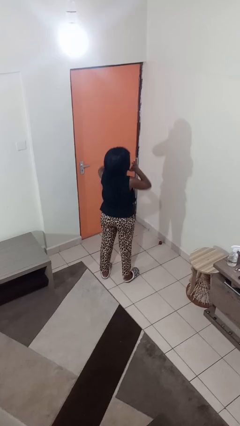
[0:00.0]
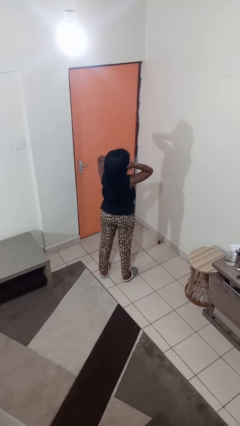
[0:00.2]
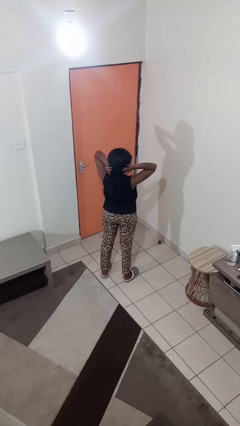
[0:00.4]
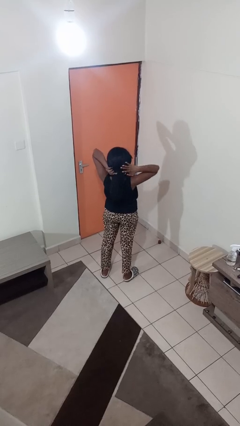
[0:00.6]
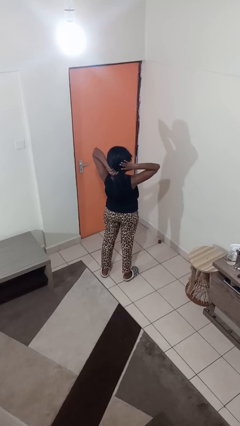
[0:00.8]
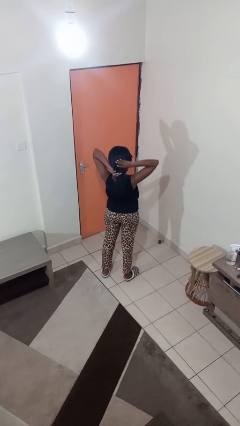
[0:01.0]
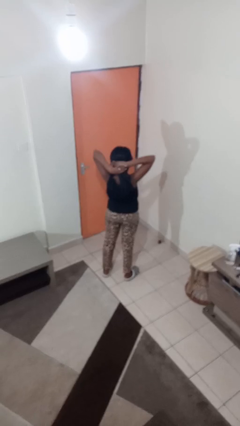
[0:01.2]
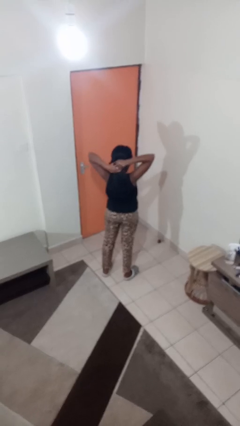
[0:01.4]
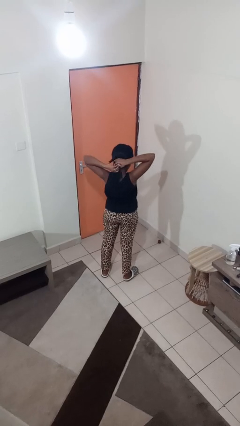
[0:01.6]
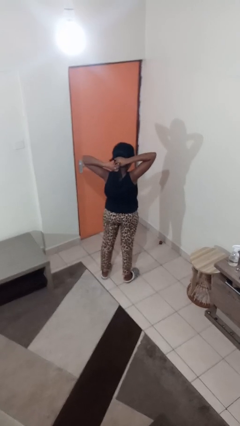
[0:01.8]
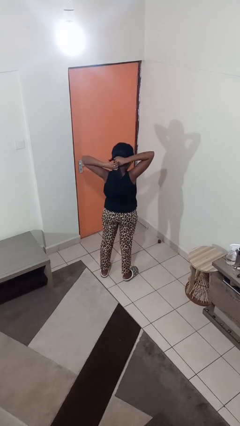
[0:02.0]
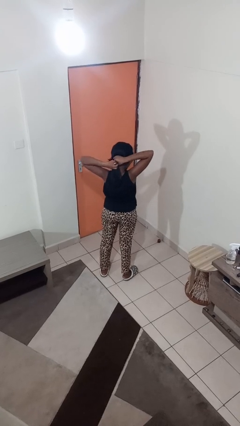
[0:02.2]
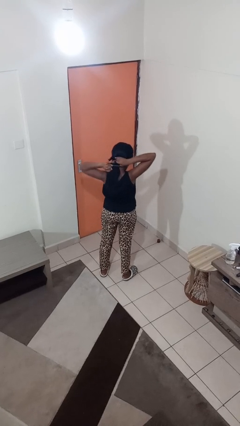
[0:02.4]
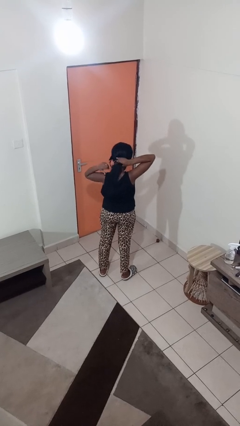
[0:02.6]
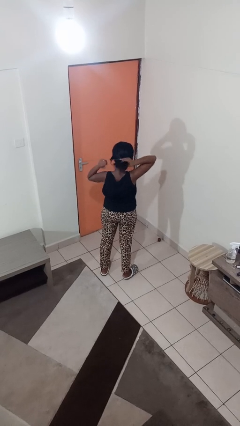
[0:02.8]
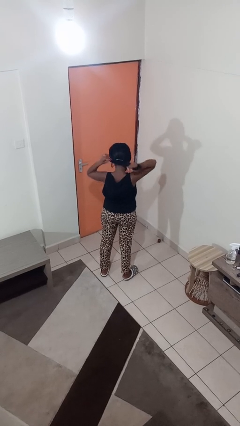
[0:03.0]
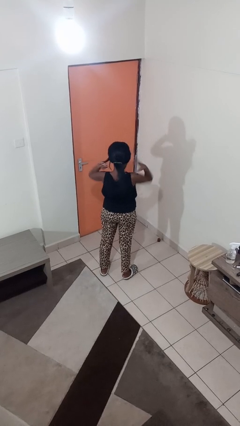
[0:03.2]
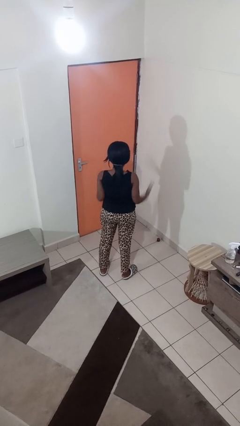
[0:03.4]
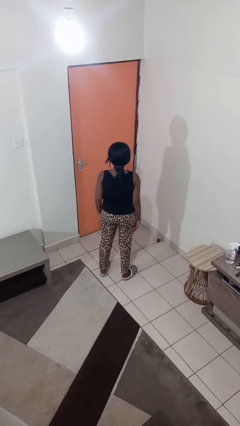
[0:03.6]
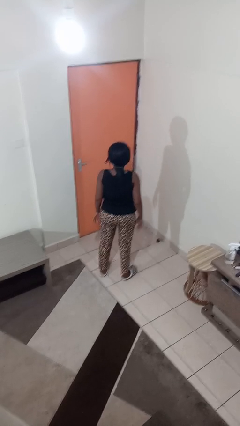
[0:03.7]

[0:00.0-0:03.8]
person puts hair in ponytail

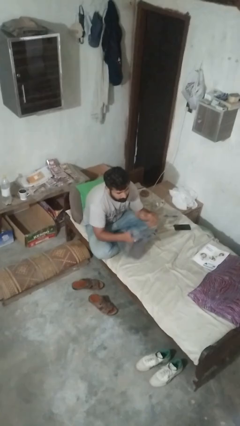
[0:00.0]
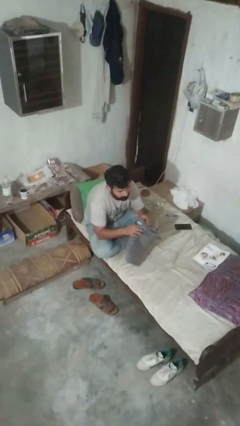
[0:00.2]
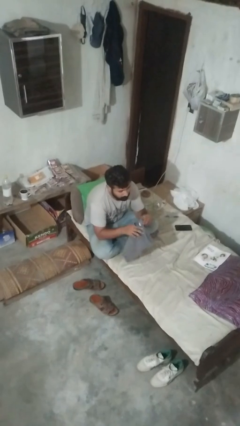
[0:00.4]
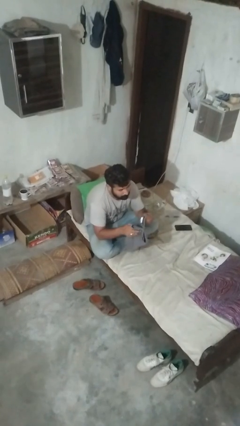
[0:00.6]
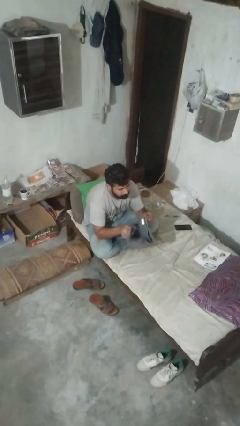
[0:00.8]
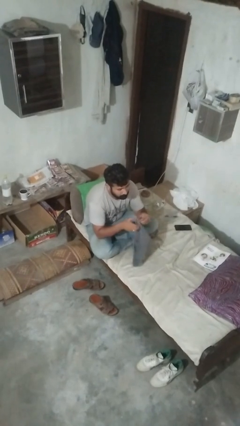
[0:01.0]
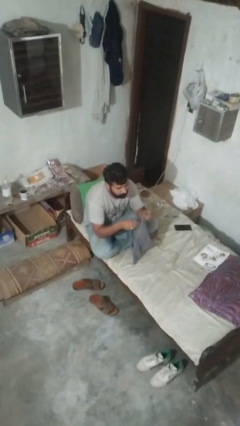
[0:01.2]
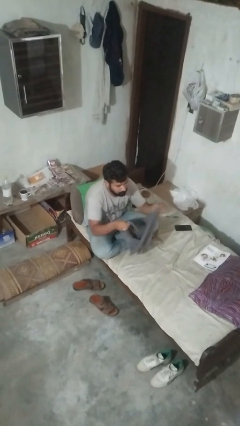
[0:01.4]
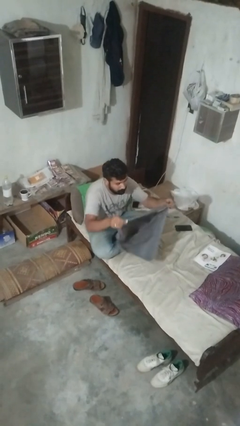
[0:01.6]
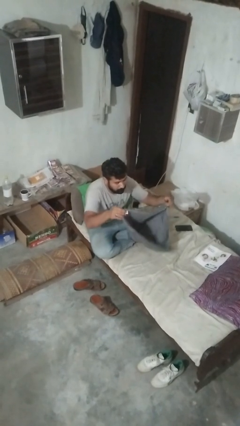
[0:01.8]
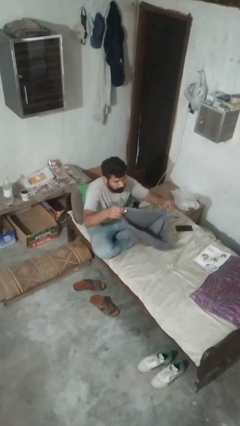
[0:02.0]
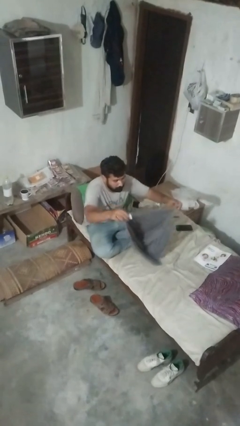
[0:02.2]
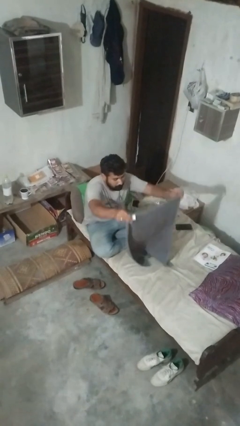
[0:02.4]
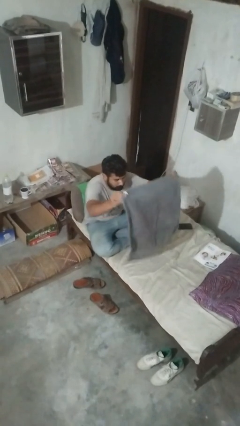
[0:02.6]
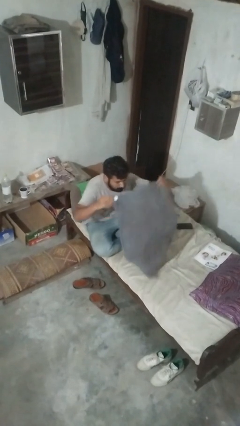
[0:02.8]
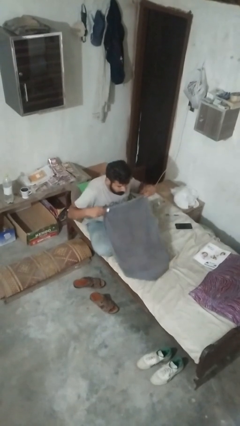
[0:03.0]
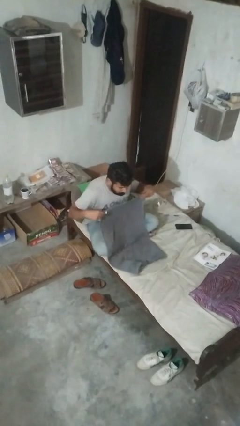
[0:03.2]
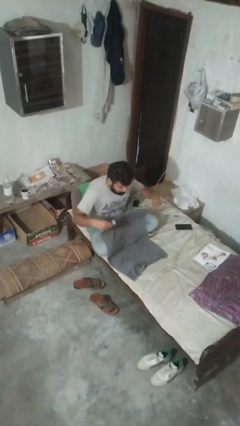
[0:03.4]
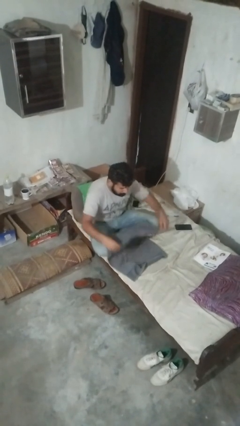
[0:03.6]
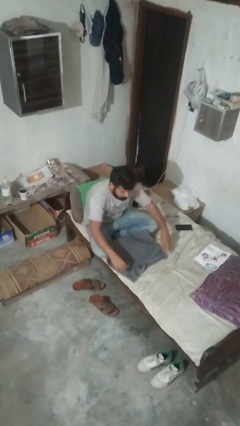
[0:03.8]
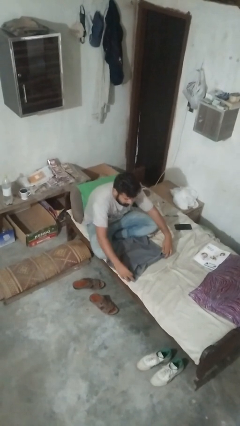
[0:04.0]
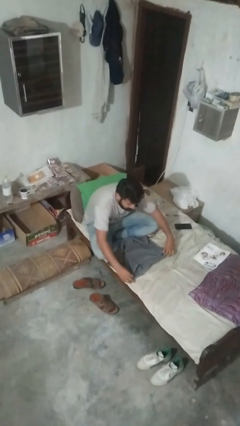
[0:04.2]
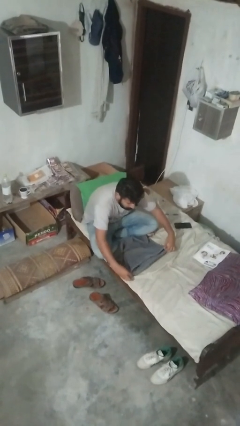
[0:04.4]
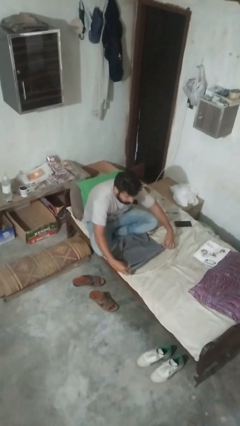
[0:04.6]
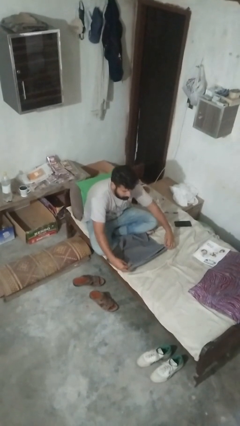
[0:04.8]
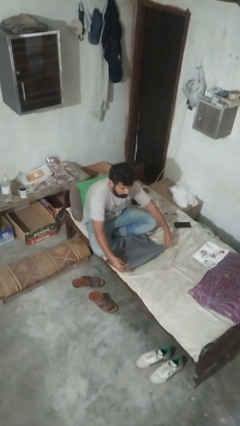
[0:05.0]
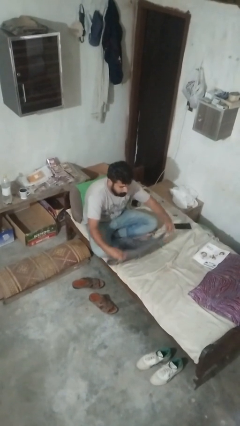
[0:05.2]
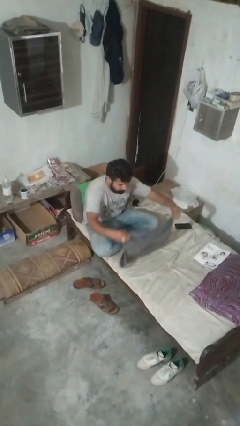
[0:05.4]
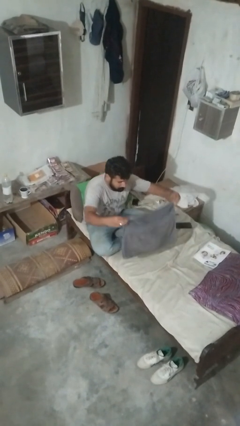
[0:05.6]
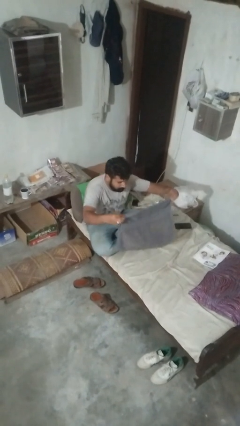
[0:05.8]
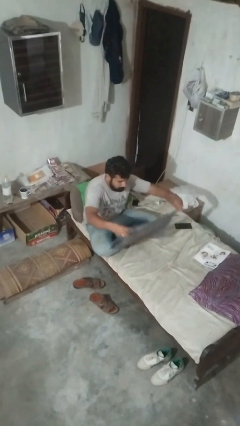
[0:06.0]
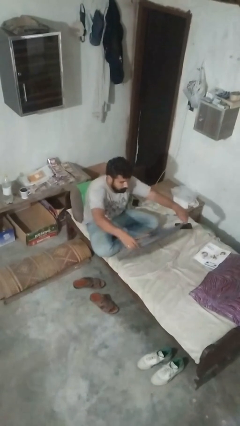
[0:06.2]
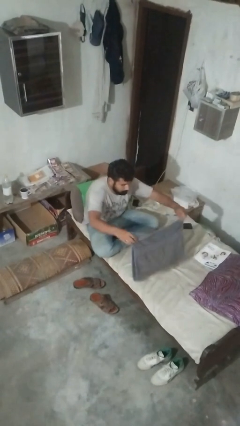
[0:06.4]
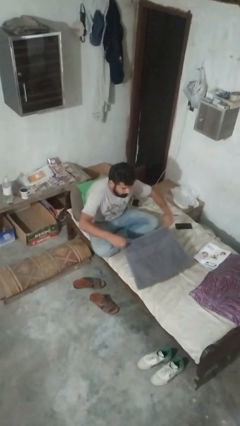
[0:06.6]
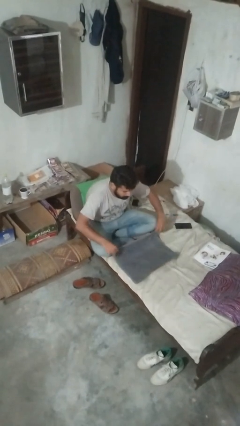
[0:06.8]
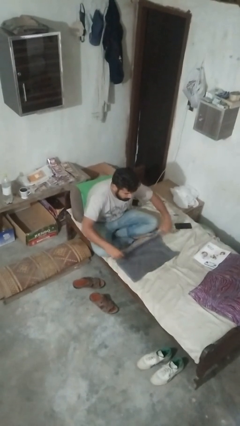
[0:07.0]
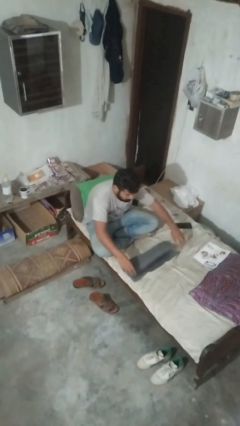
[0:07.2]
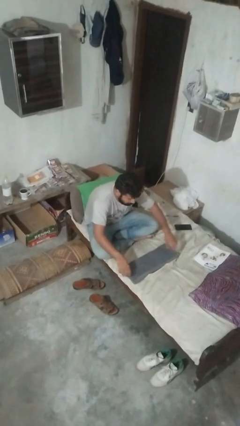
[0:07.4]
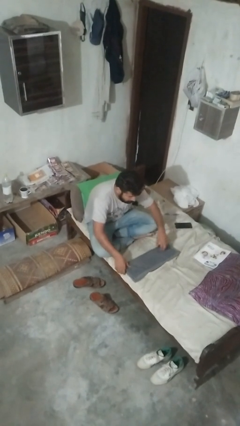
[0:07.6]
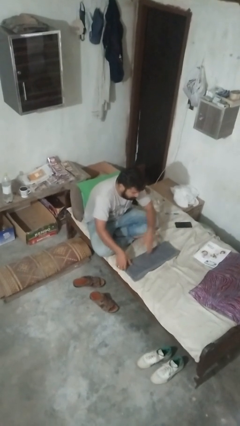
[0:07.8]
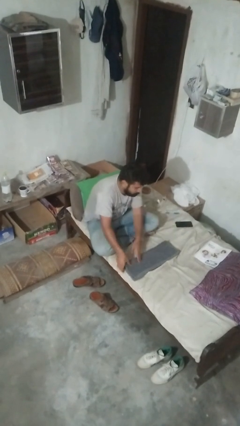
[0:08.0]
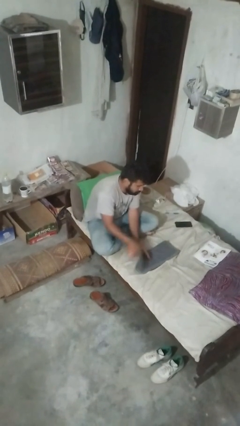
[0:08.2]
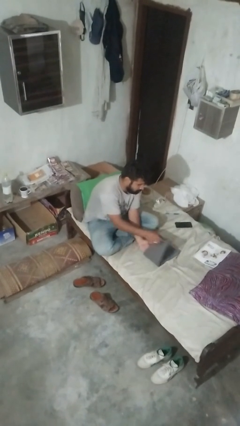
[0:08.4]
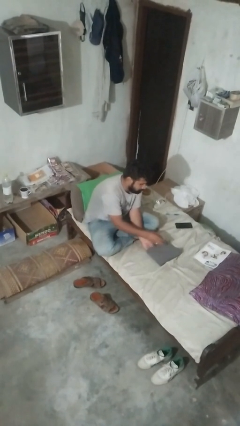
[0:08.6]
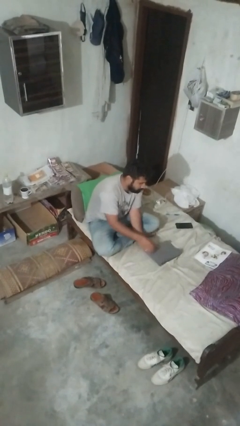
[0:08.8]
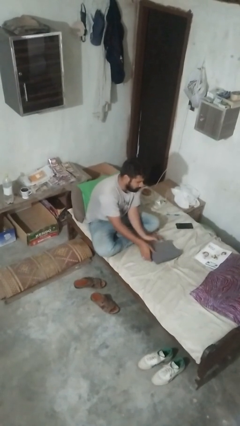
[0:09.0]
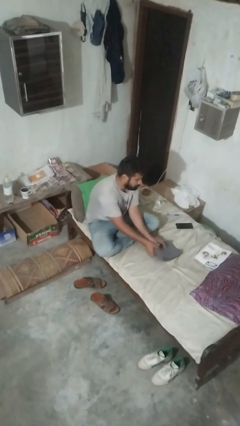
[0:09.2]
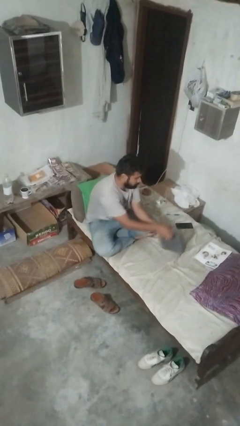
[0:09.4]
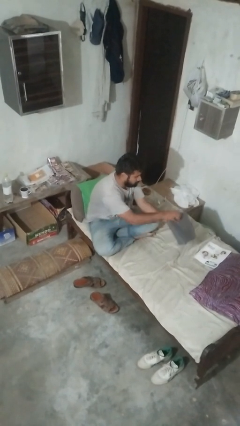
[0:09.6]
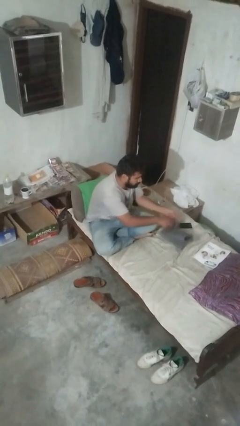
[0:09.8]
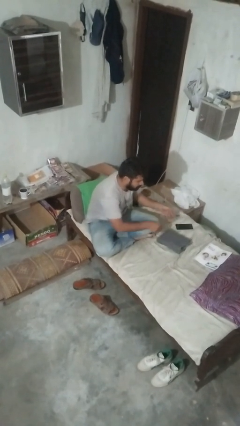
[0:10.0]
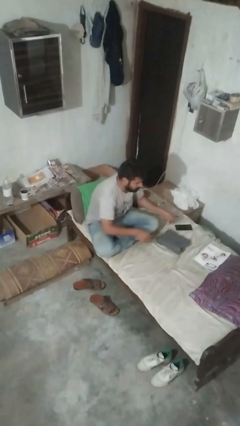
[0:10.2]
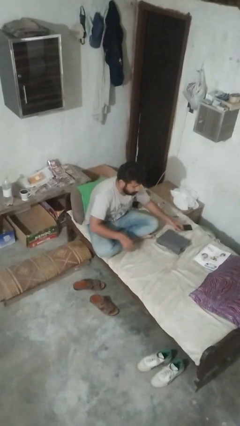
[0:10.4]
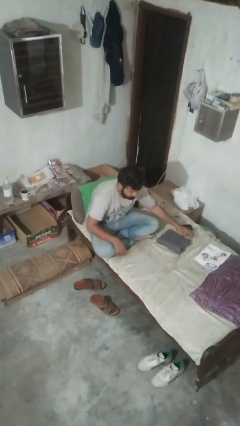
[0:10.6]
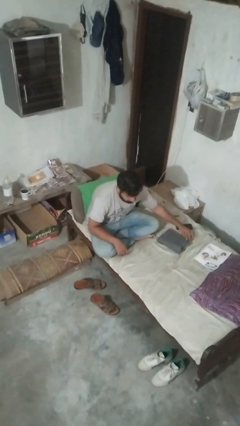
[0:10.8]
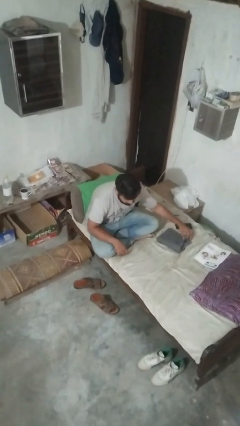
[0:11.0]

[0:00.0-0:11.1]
person folds towel

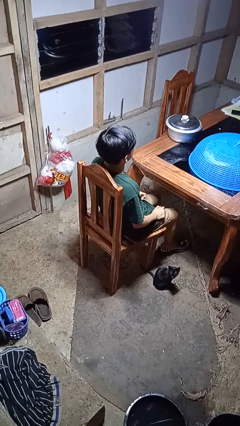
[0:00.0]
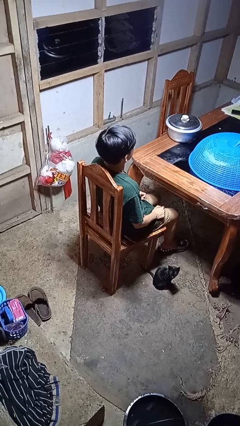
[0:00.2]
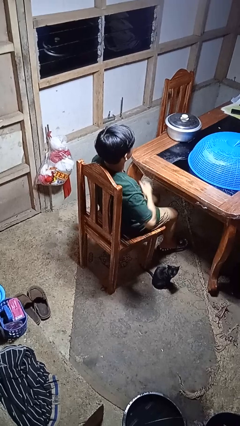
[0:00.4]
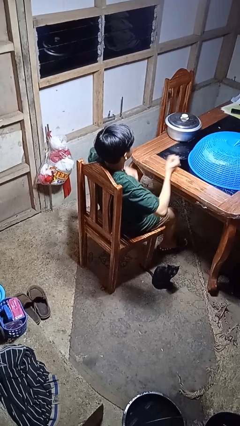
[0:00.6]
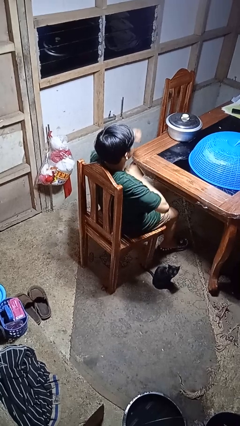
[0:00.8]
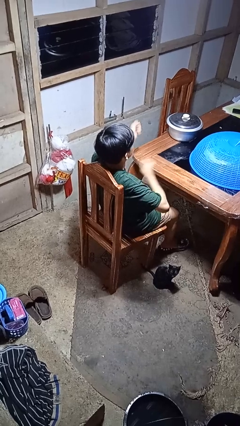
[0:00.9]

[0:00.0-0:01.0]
person drums on chest

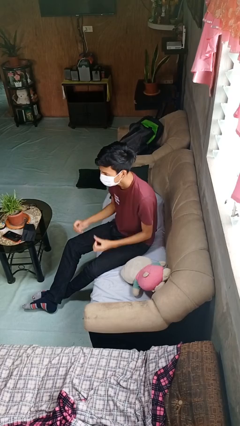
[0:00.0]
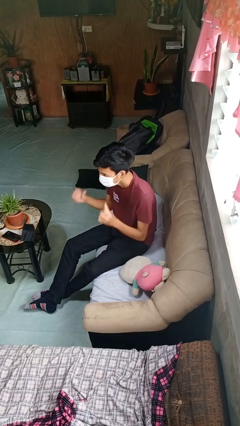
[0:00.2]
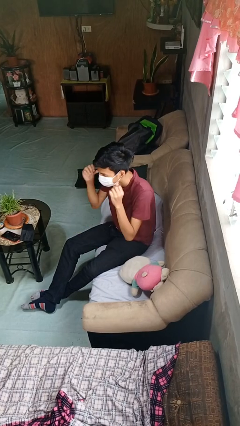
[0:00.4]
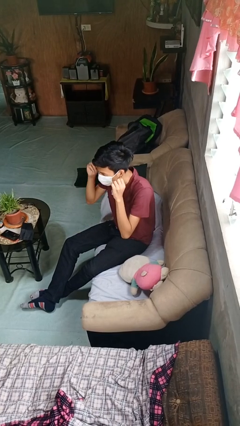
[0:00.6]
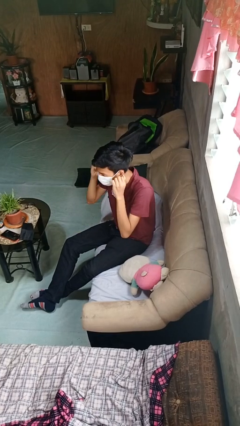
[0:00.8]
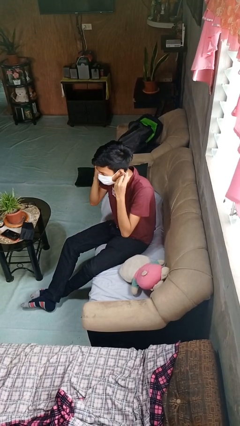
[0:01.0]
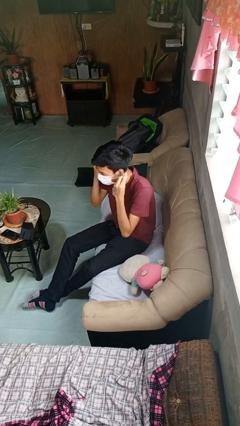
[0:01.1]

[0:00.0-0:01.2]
person takes off facemask

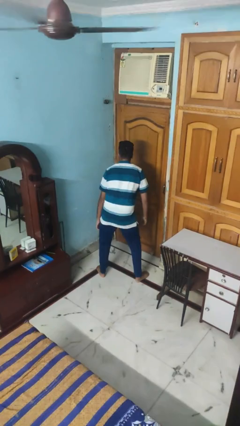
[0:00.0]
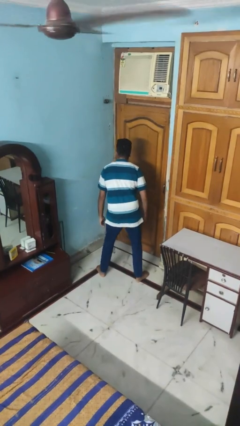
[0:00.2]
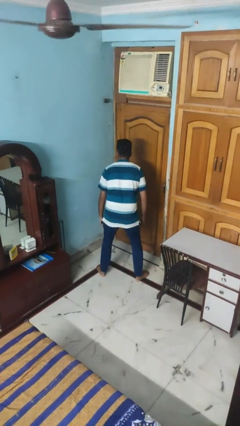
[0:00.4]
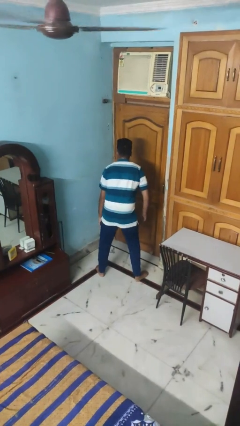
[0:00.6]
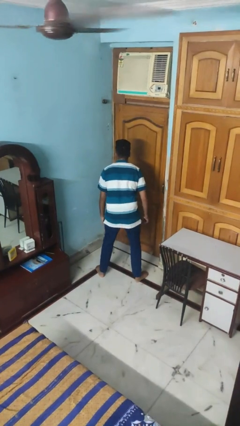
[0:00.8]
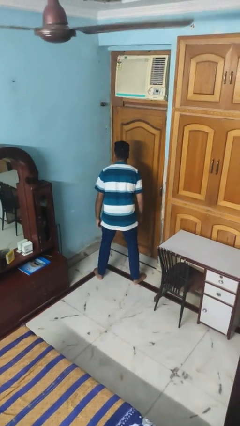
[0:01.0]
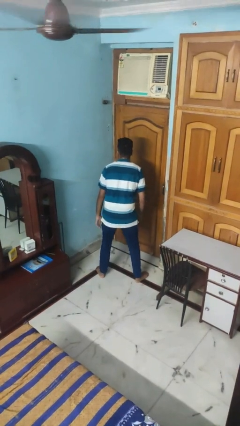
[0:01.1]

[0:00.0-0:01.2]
person wiggles hips
